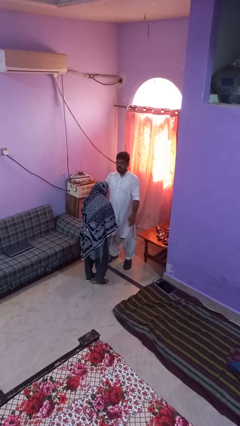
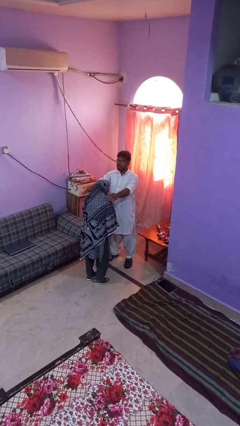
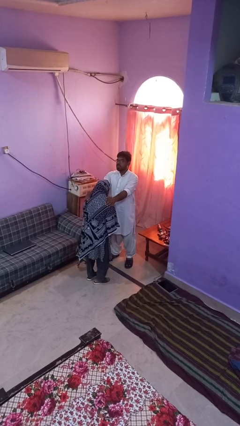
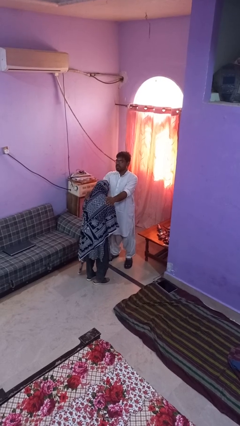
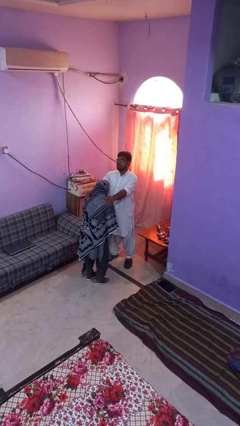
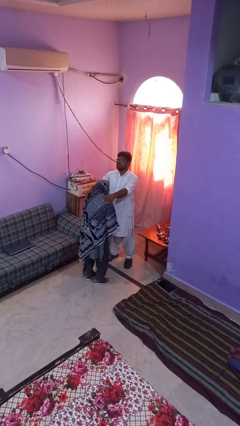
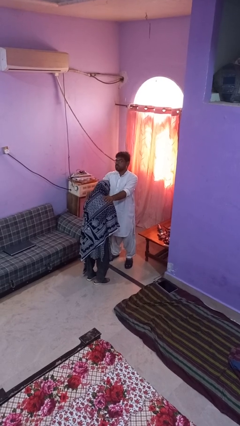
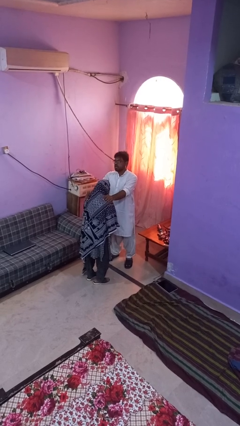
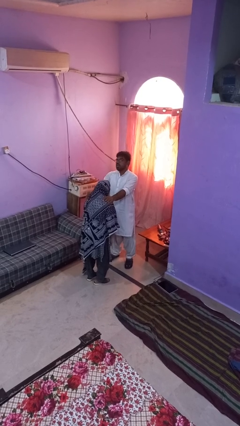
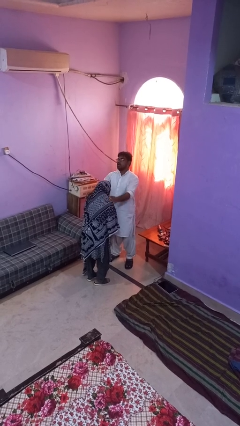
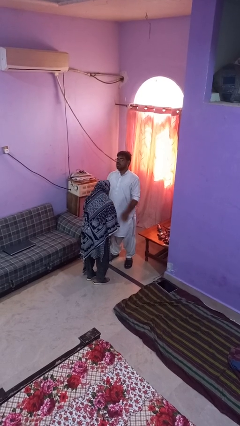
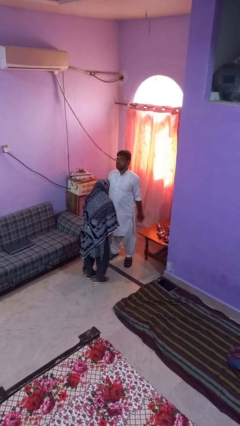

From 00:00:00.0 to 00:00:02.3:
person pounds shoulders of person

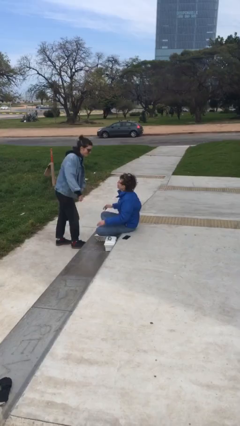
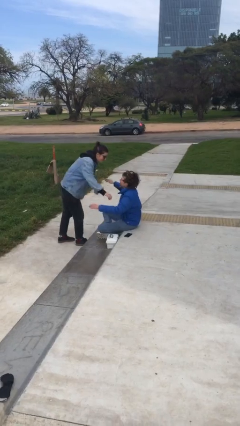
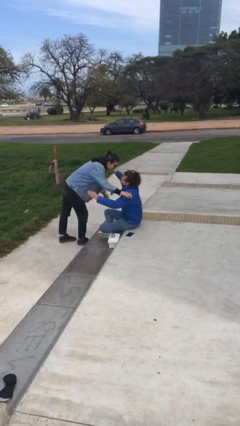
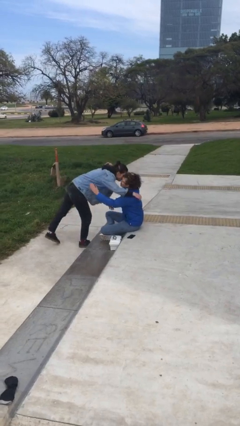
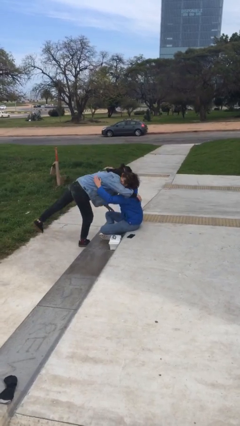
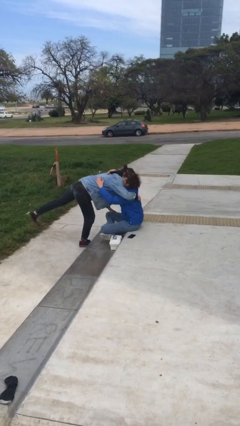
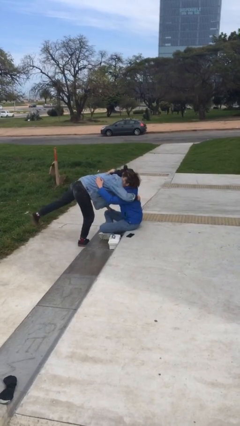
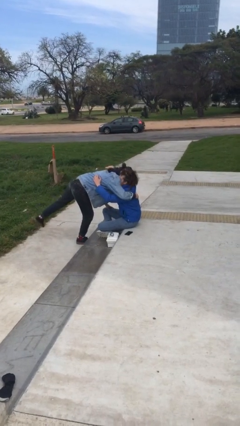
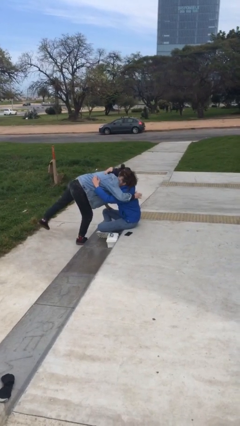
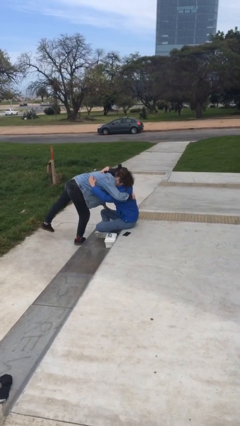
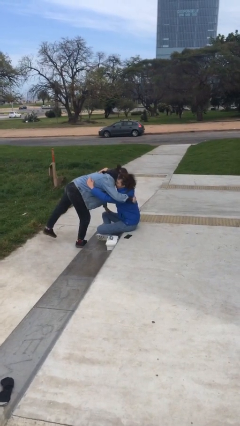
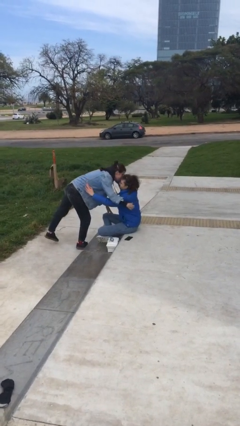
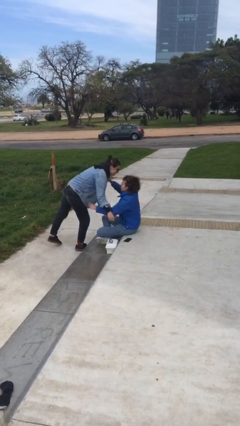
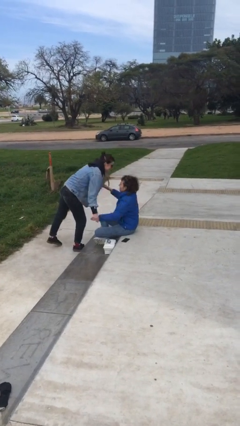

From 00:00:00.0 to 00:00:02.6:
person embraces person

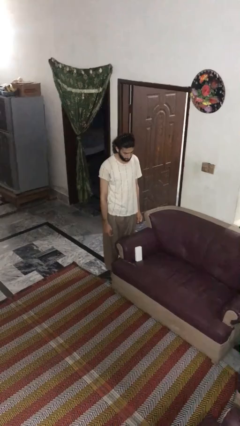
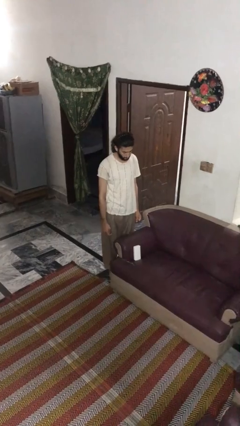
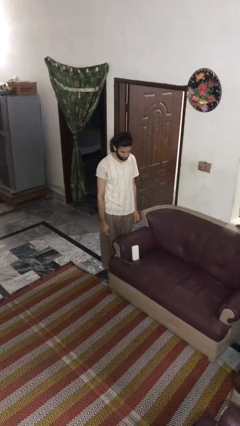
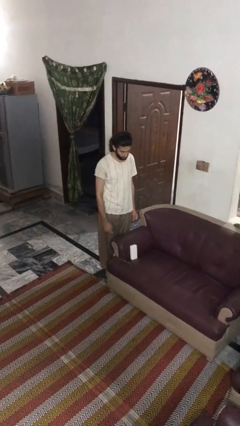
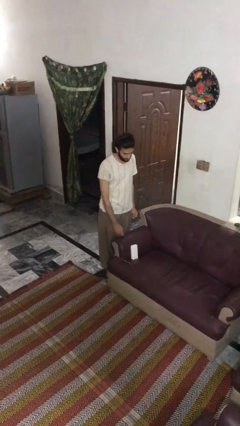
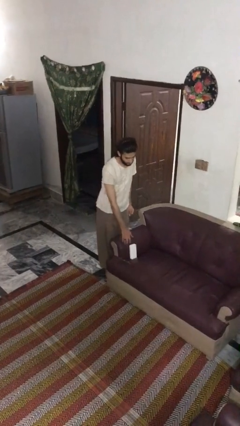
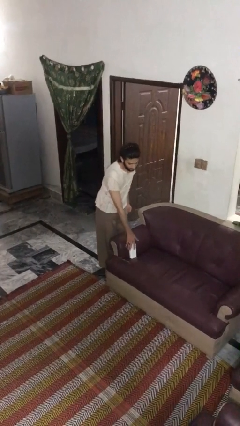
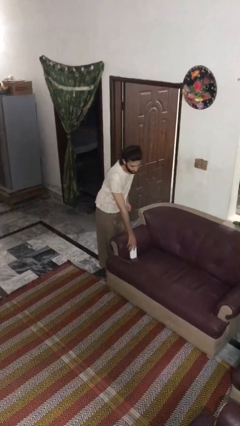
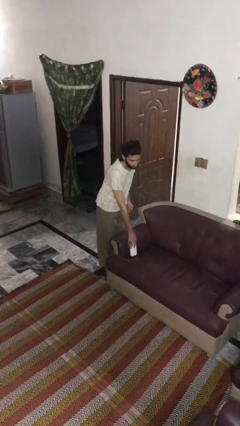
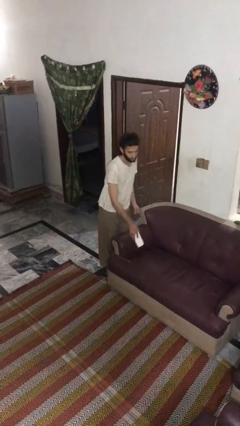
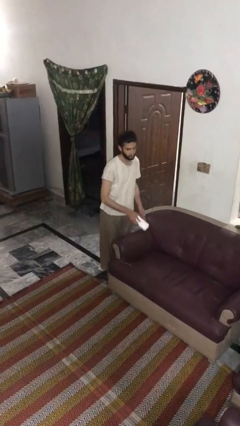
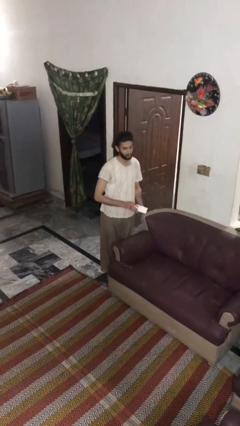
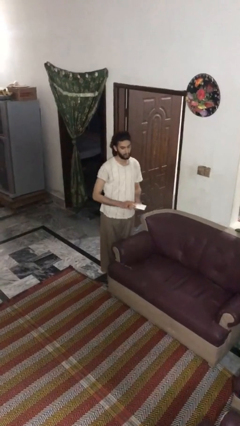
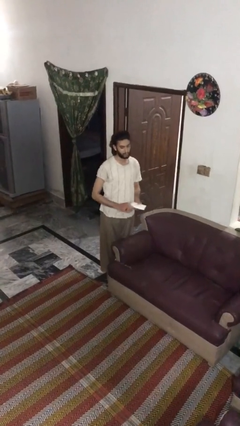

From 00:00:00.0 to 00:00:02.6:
person picks up object from couch

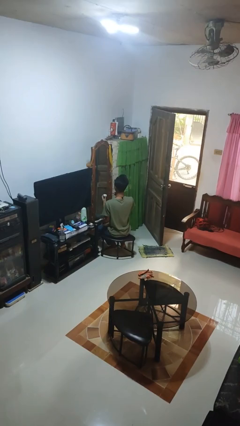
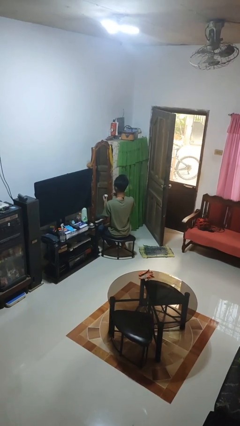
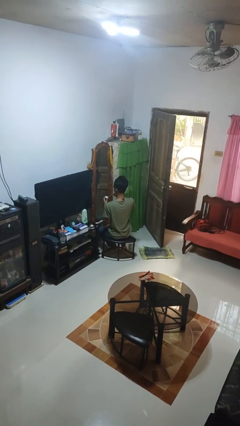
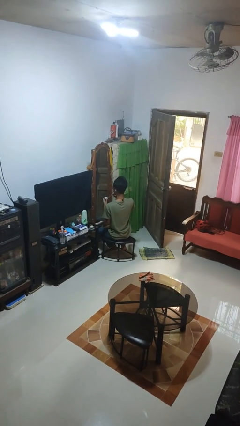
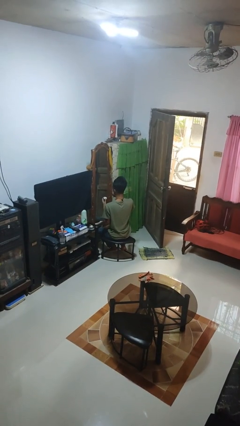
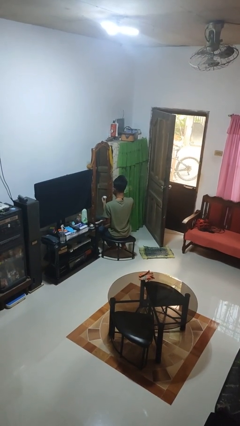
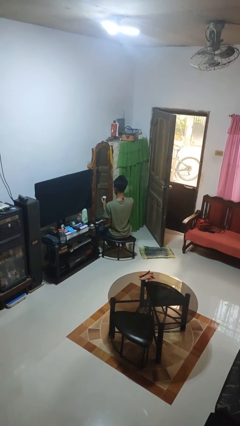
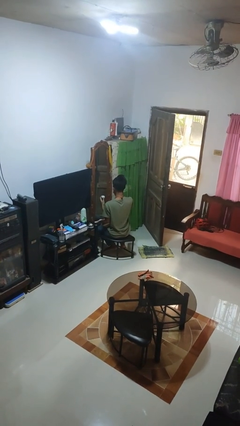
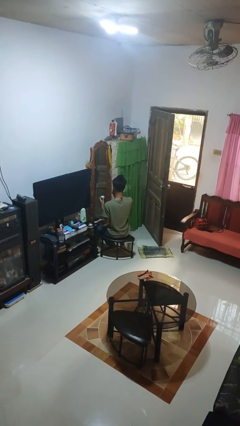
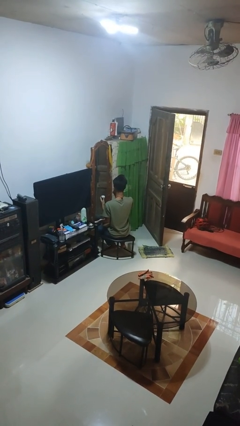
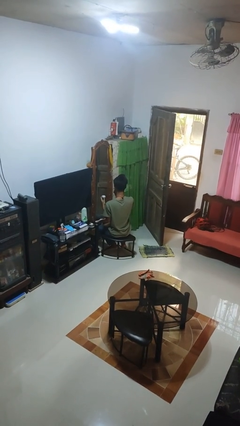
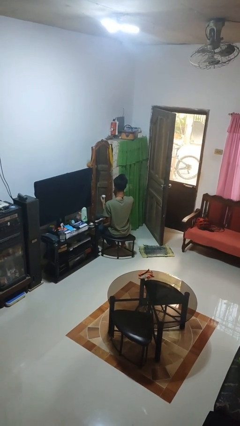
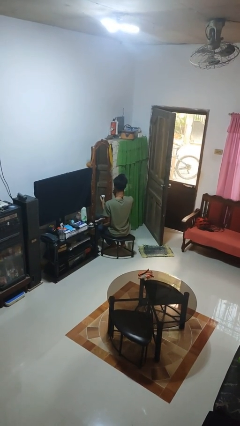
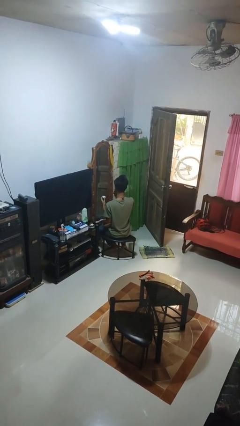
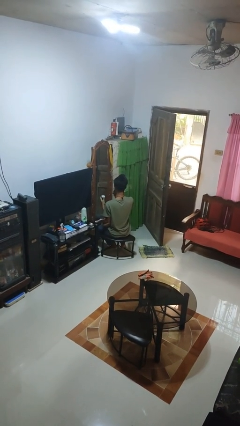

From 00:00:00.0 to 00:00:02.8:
person applies eye makeup

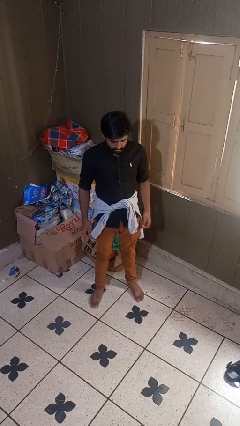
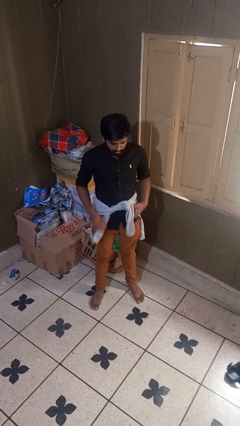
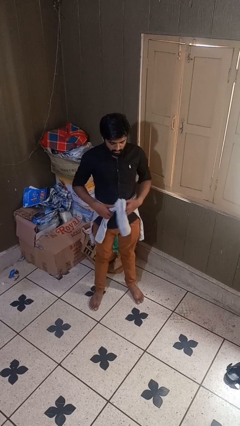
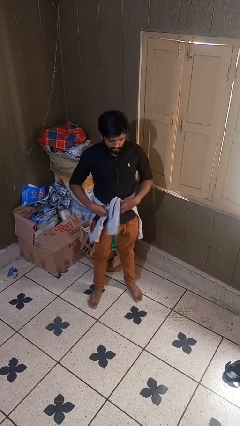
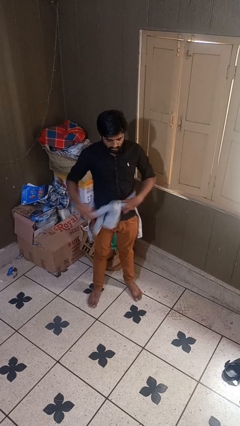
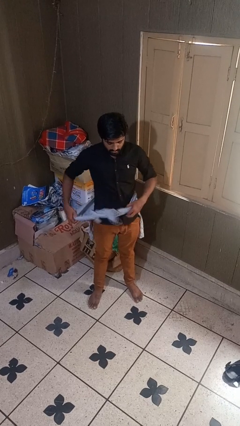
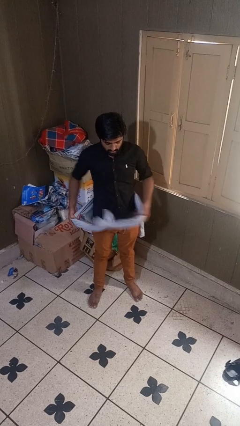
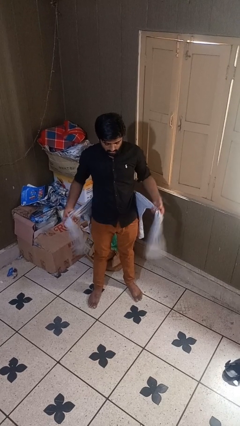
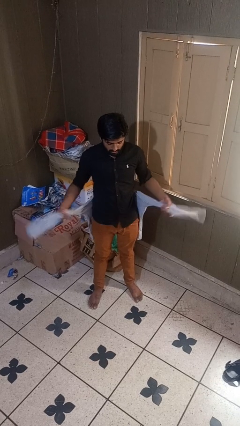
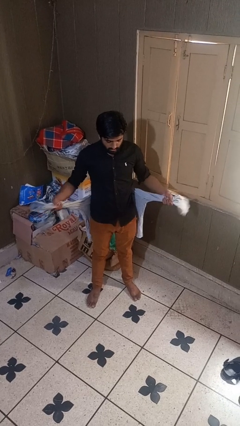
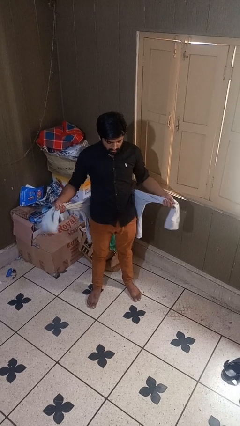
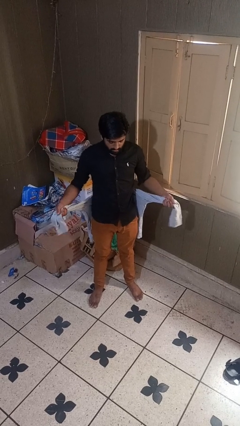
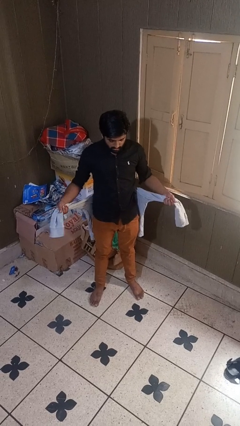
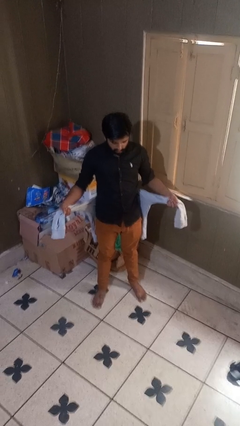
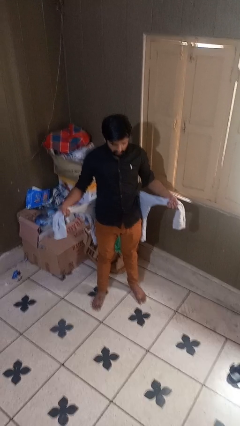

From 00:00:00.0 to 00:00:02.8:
person unties jacket around waist

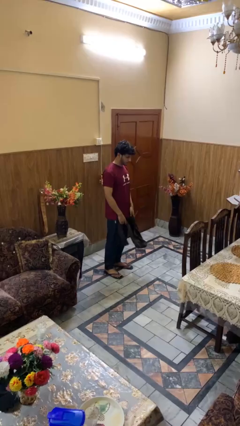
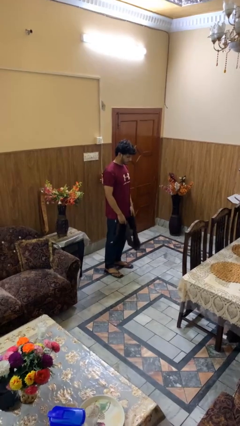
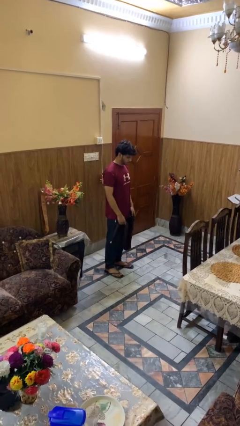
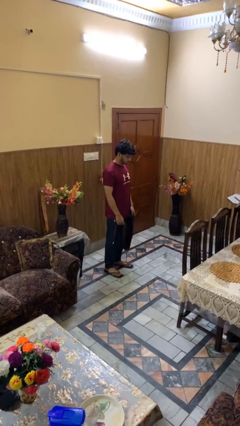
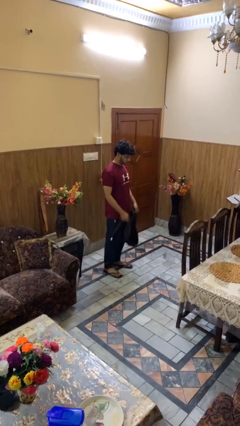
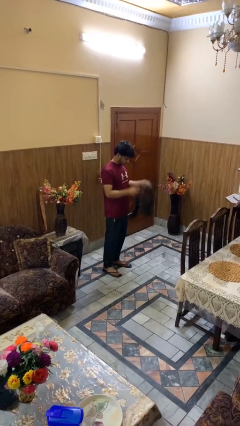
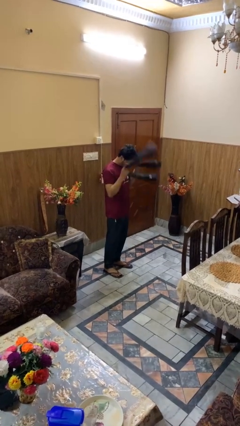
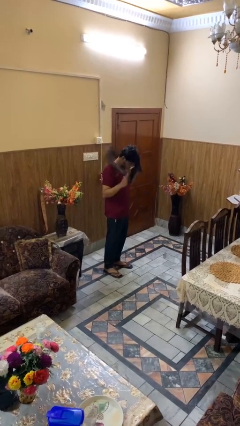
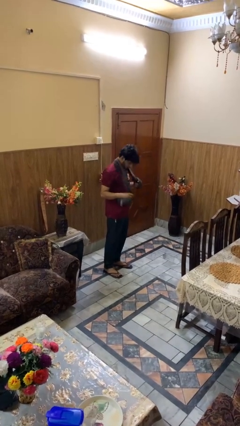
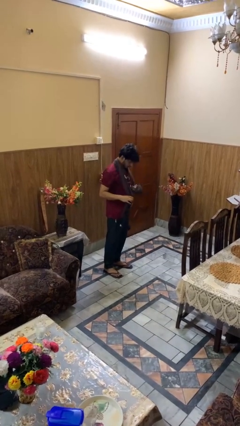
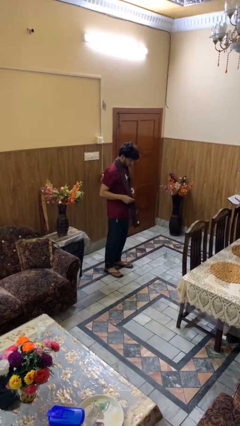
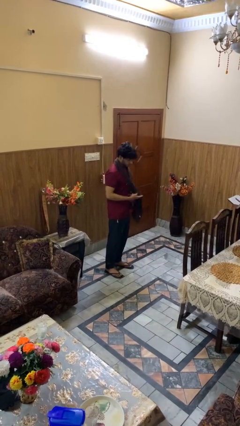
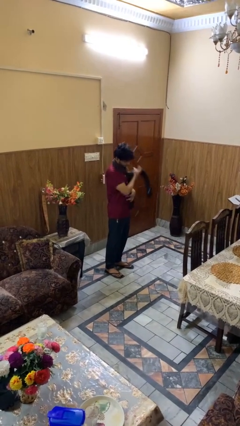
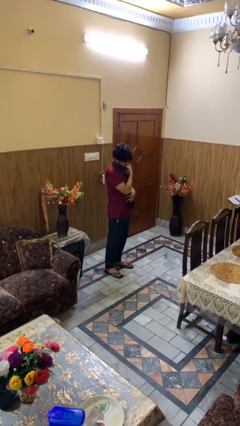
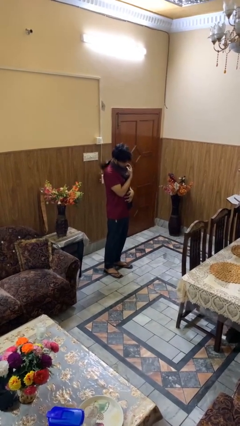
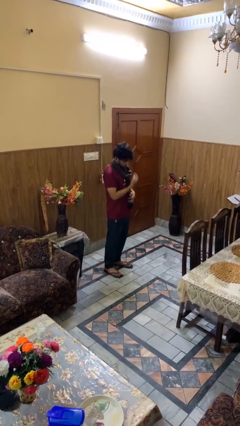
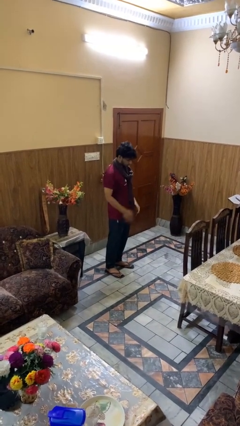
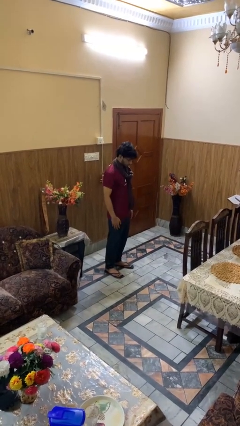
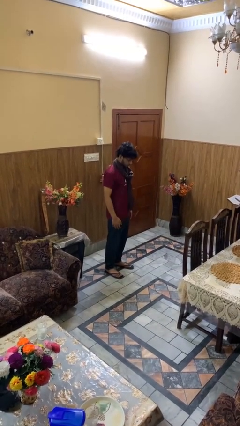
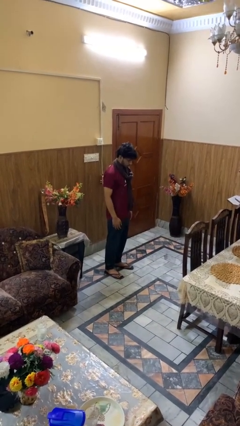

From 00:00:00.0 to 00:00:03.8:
person puts on scarf

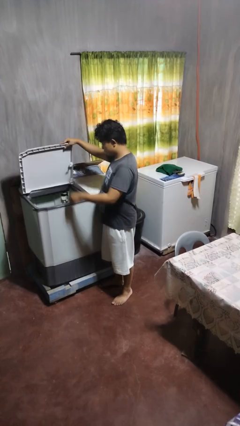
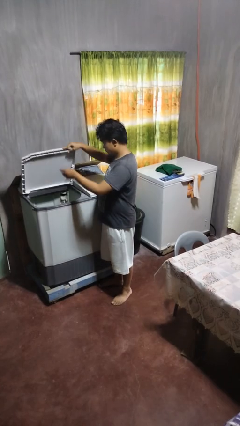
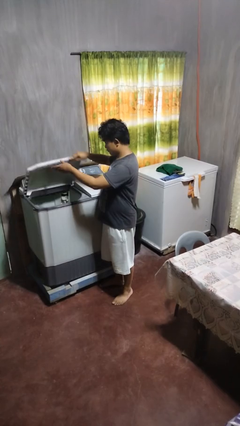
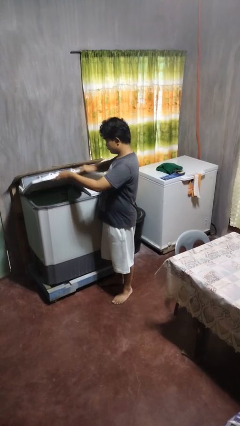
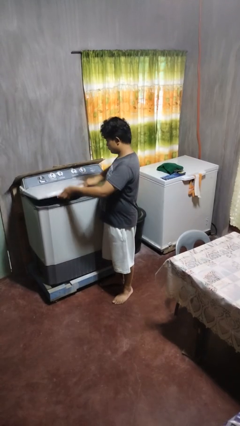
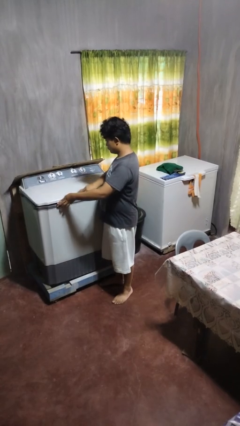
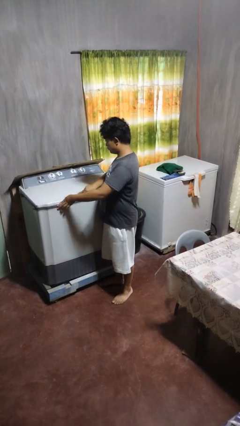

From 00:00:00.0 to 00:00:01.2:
person closes clothes washer
